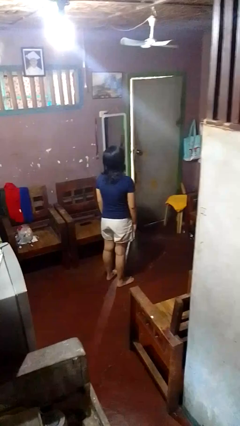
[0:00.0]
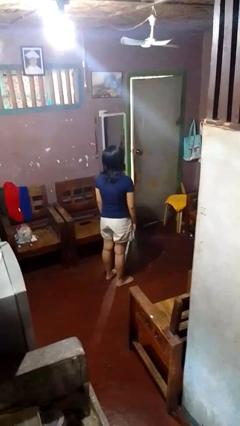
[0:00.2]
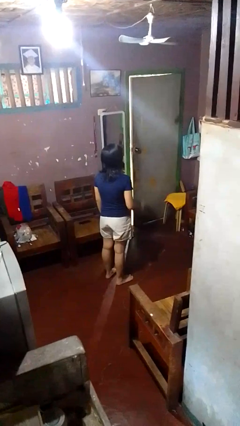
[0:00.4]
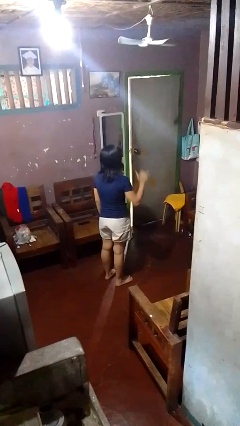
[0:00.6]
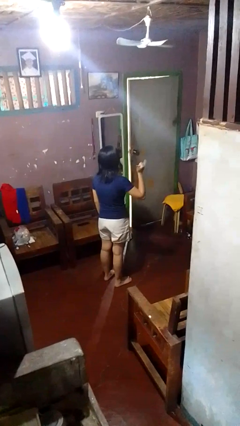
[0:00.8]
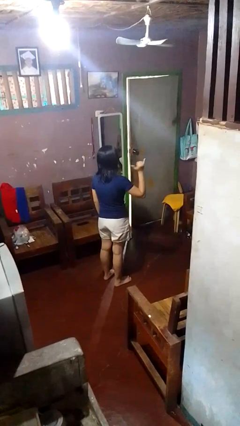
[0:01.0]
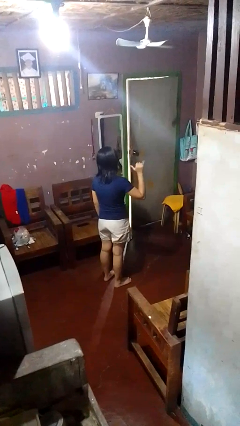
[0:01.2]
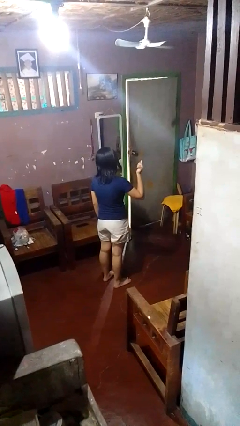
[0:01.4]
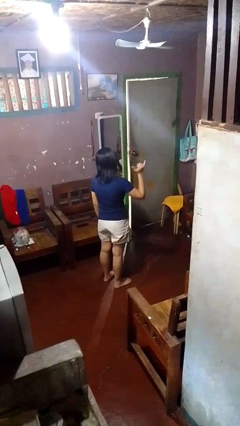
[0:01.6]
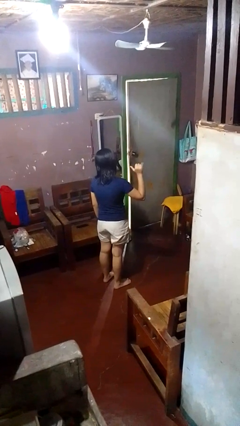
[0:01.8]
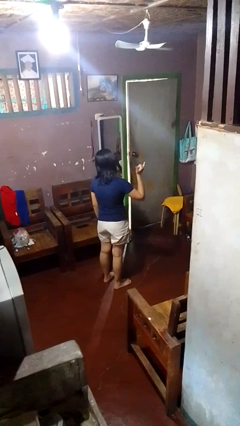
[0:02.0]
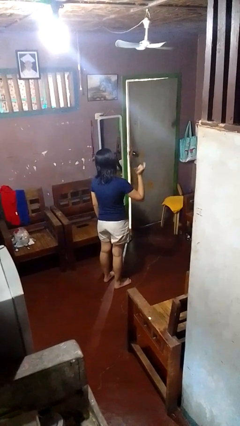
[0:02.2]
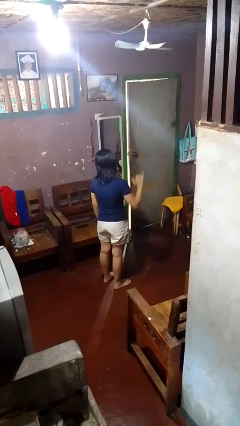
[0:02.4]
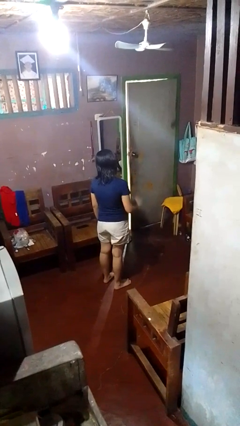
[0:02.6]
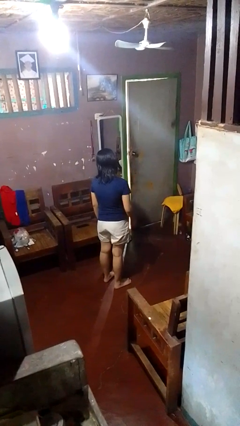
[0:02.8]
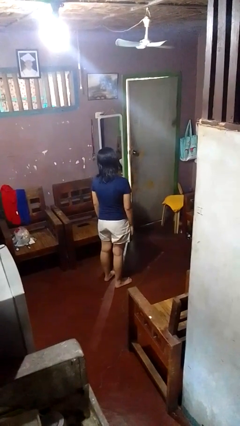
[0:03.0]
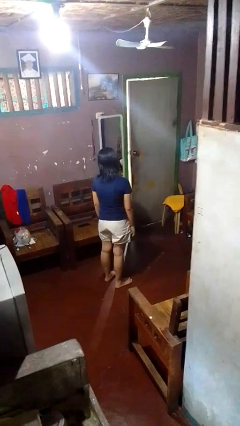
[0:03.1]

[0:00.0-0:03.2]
person gestures hang loose

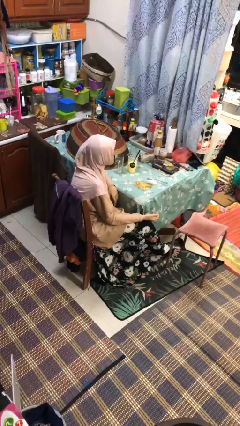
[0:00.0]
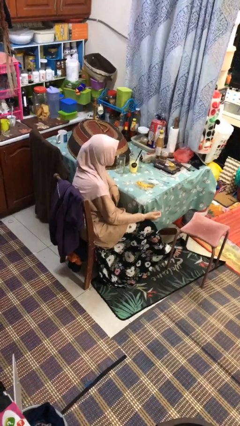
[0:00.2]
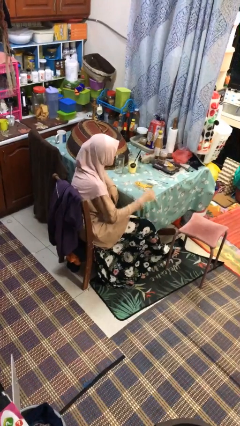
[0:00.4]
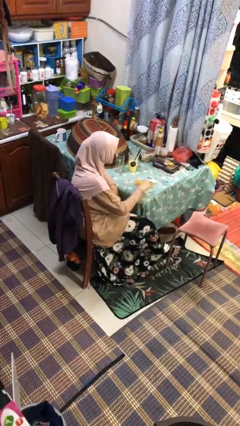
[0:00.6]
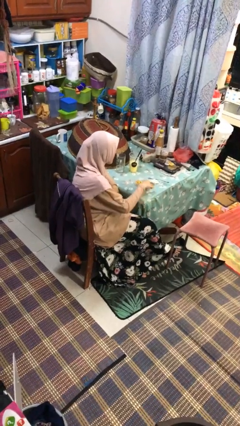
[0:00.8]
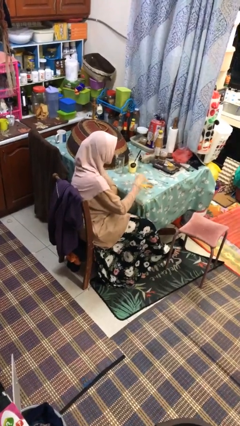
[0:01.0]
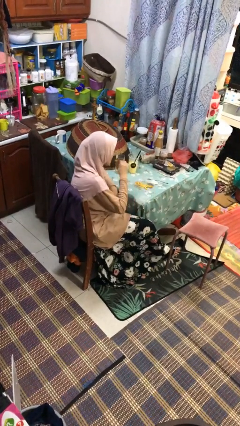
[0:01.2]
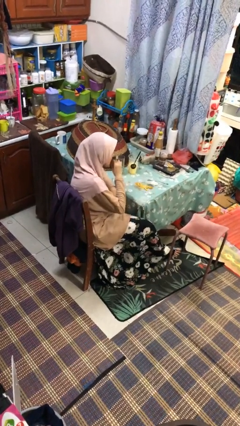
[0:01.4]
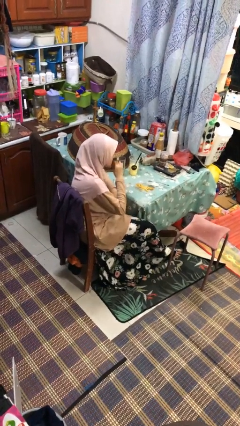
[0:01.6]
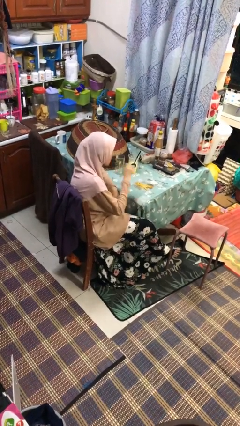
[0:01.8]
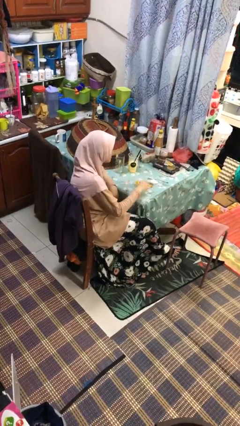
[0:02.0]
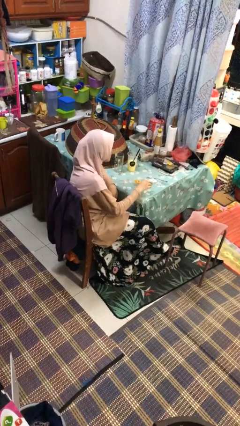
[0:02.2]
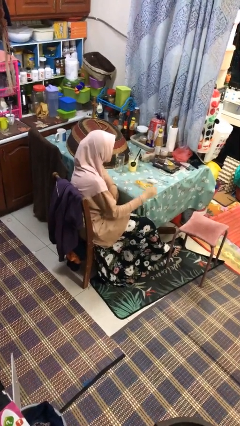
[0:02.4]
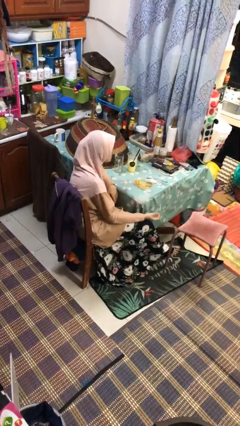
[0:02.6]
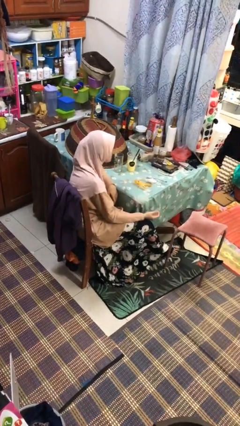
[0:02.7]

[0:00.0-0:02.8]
person eats with hands

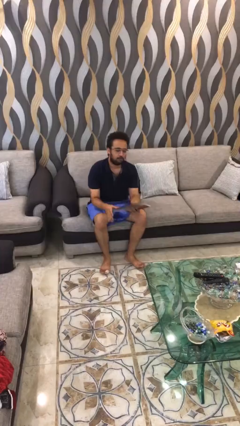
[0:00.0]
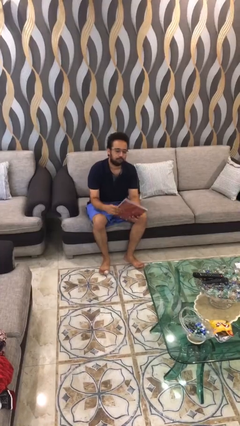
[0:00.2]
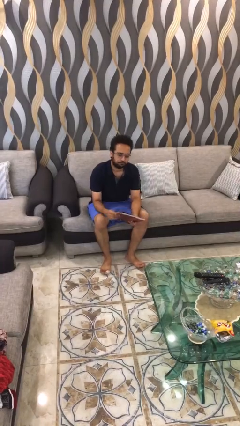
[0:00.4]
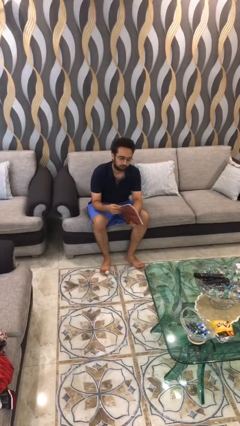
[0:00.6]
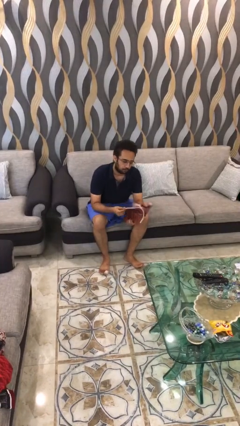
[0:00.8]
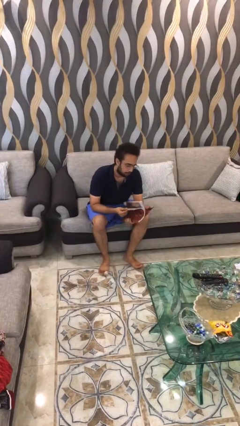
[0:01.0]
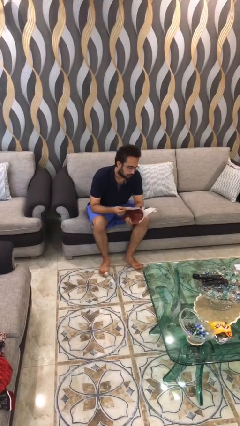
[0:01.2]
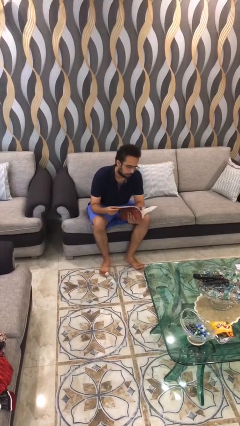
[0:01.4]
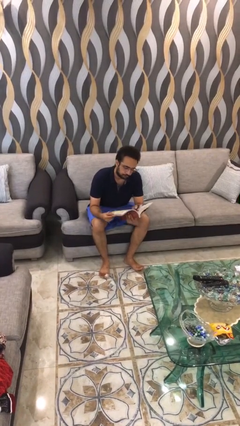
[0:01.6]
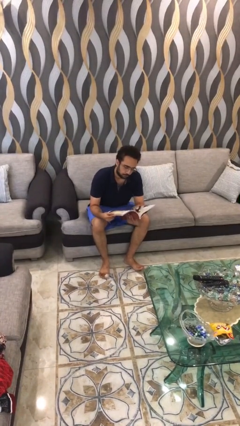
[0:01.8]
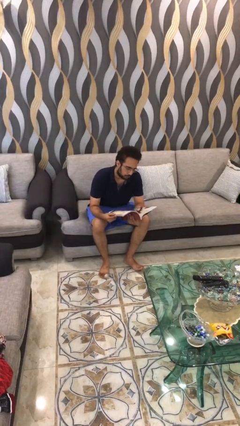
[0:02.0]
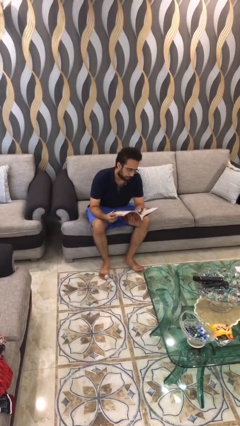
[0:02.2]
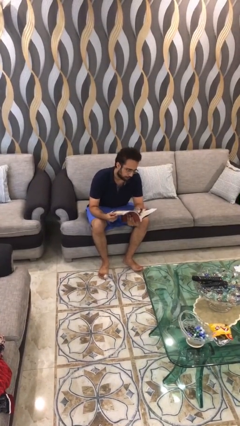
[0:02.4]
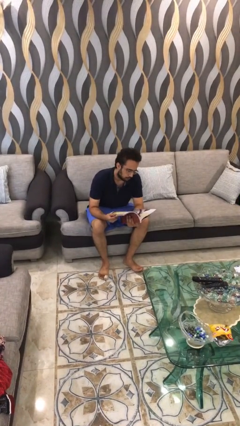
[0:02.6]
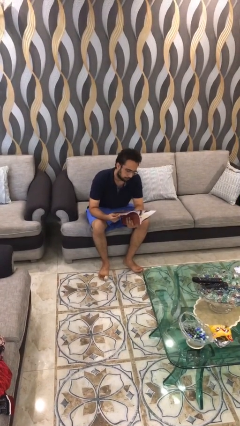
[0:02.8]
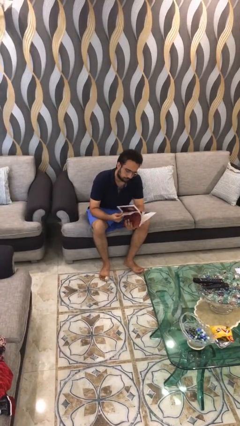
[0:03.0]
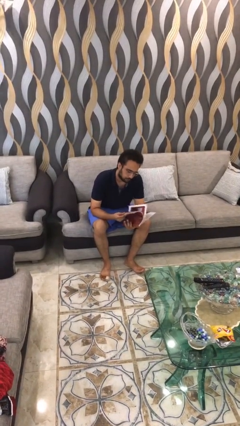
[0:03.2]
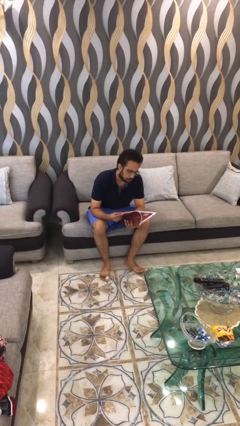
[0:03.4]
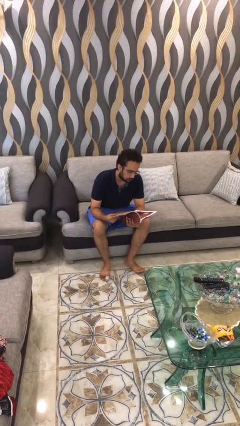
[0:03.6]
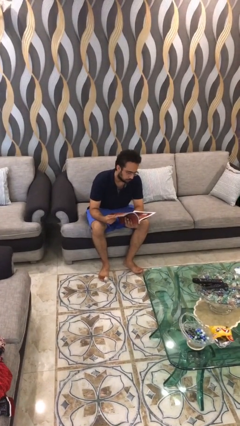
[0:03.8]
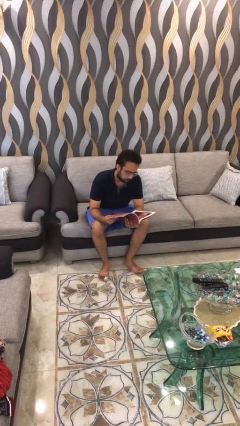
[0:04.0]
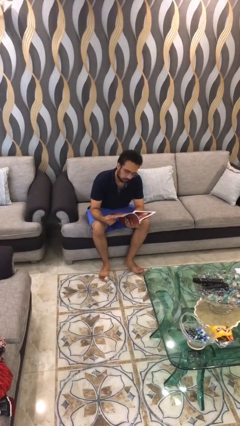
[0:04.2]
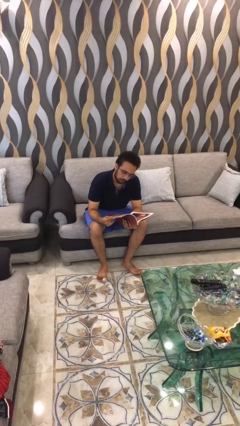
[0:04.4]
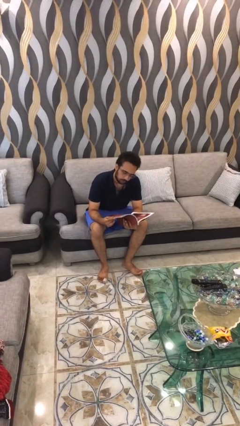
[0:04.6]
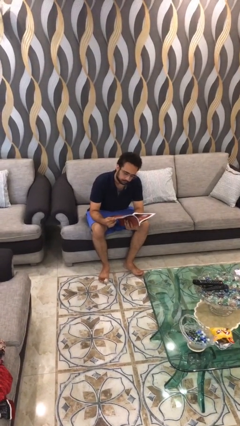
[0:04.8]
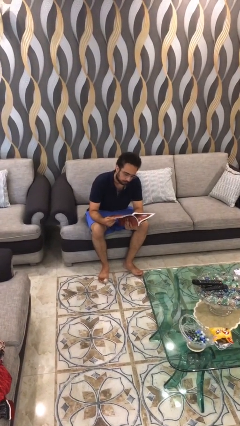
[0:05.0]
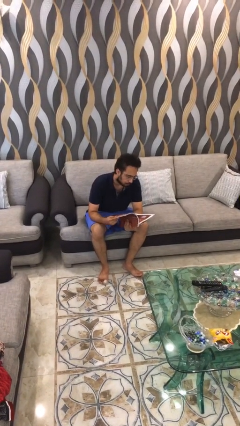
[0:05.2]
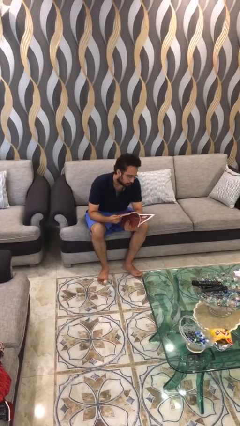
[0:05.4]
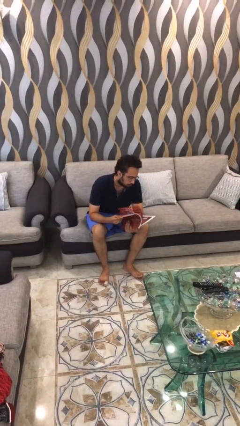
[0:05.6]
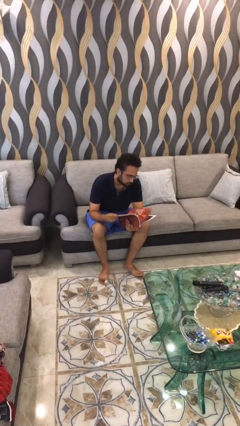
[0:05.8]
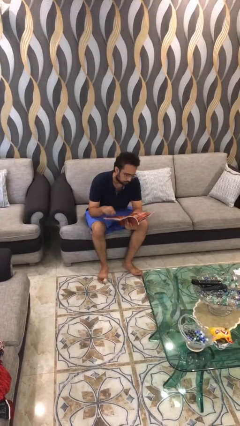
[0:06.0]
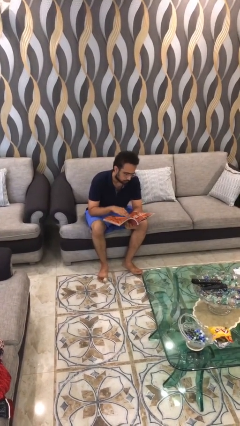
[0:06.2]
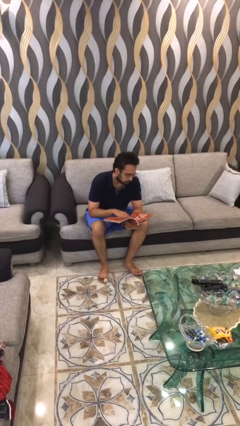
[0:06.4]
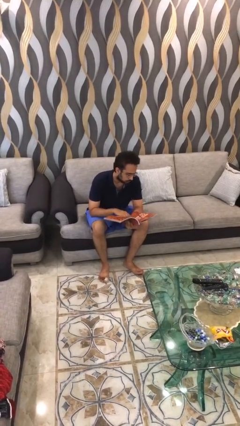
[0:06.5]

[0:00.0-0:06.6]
person reads document

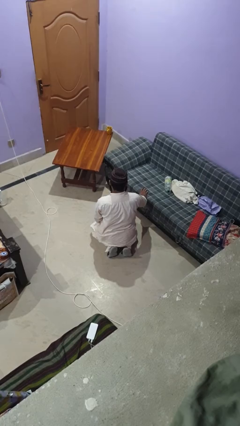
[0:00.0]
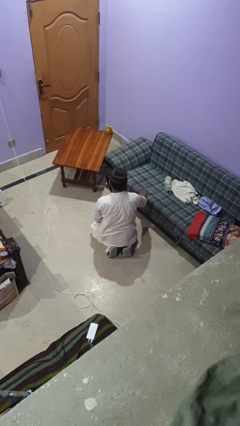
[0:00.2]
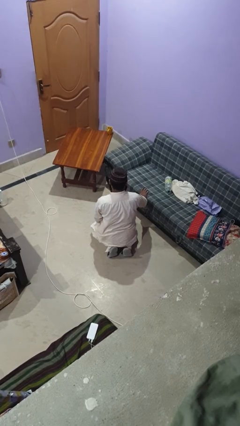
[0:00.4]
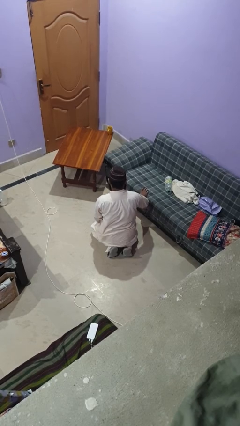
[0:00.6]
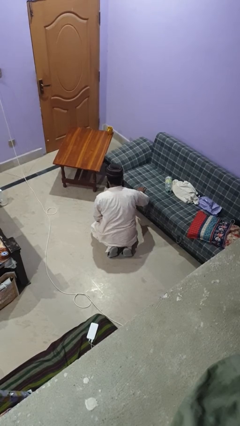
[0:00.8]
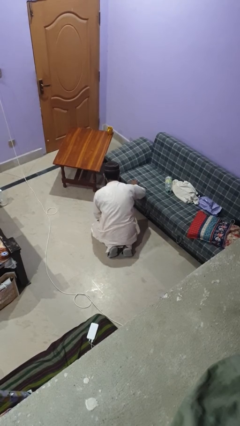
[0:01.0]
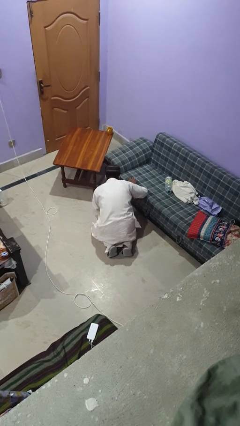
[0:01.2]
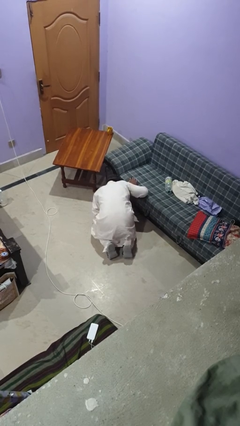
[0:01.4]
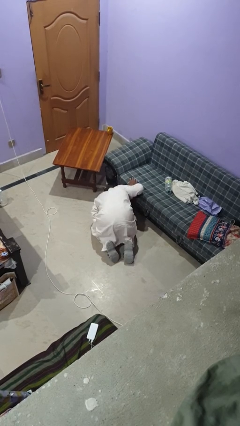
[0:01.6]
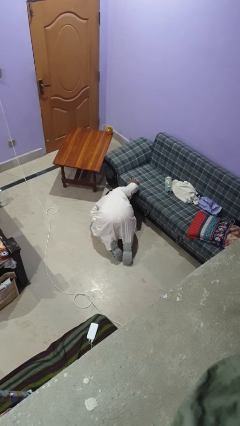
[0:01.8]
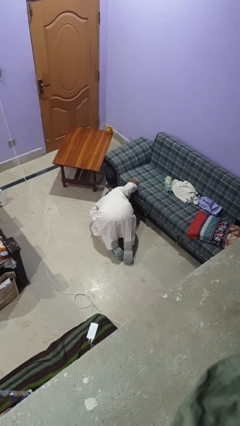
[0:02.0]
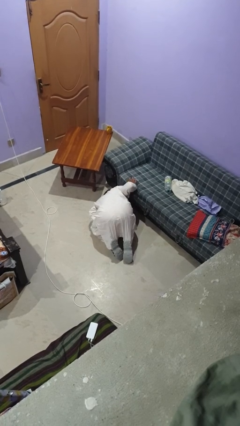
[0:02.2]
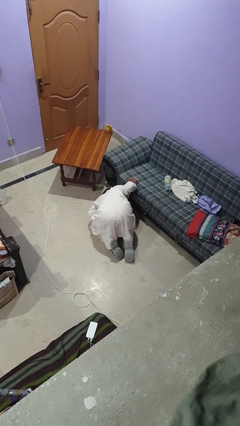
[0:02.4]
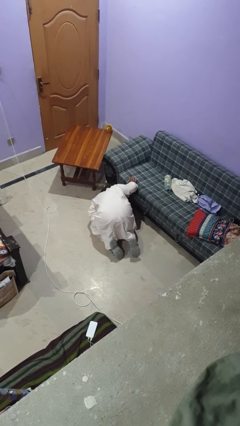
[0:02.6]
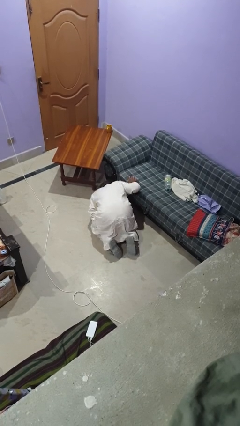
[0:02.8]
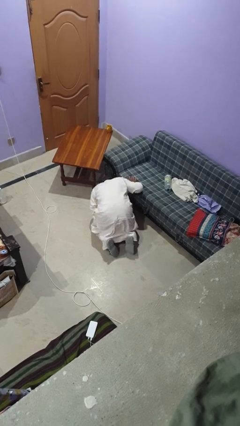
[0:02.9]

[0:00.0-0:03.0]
person searches under couch

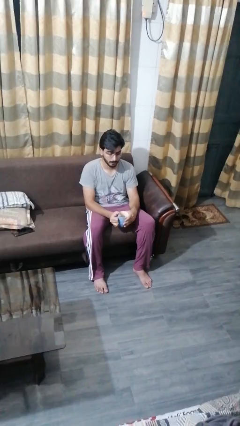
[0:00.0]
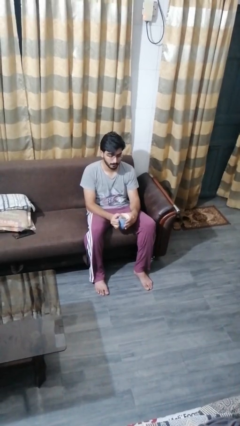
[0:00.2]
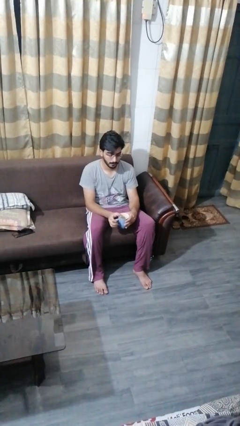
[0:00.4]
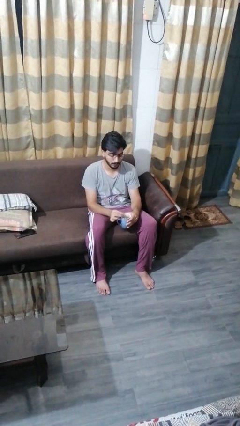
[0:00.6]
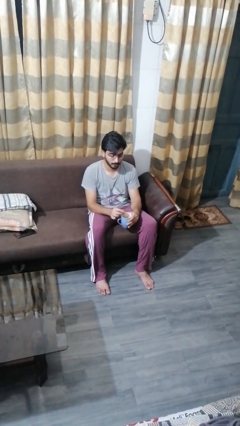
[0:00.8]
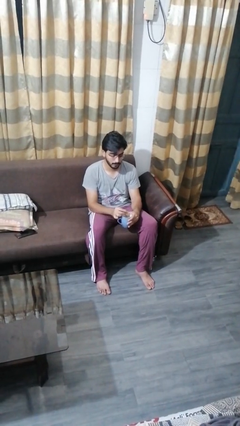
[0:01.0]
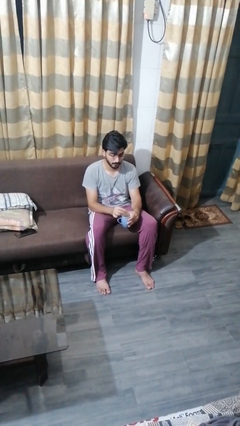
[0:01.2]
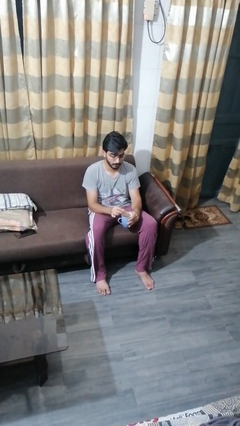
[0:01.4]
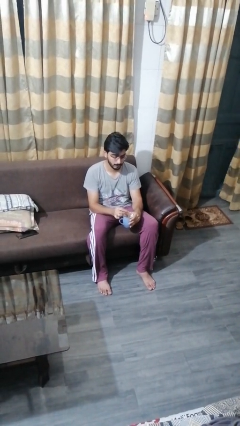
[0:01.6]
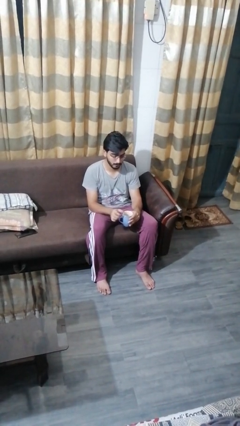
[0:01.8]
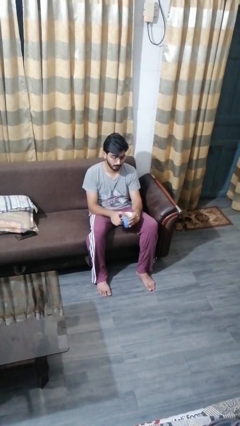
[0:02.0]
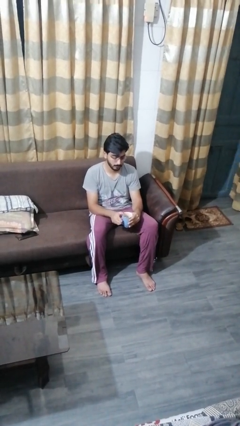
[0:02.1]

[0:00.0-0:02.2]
person stirs mug
